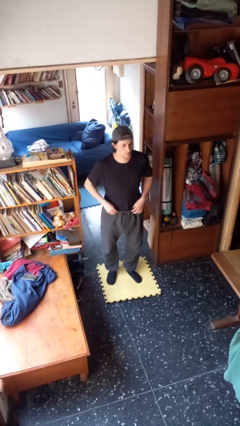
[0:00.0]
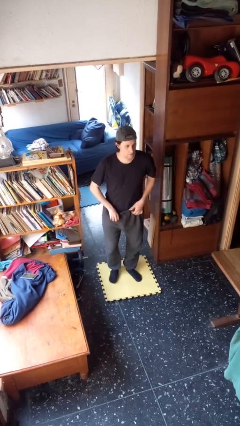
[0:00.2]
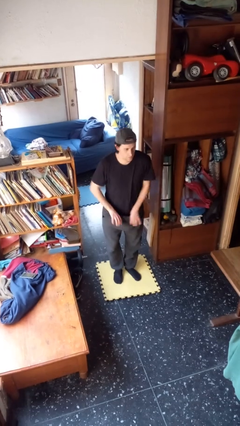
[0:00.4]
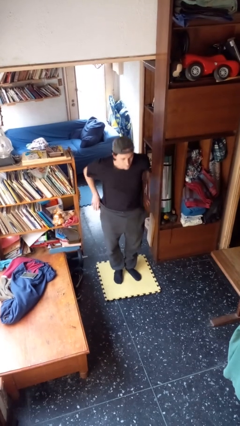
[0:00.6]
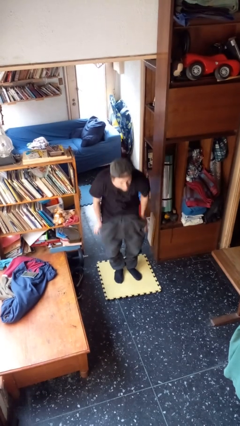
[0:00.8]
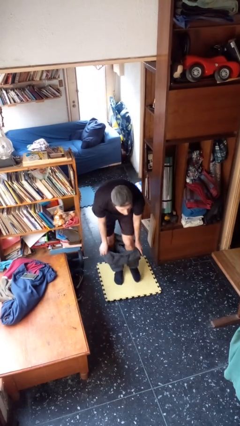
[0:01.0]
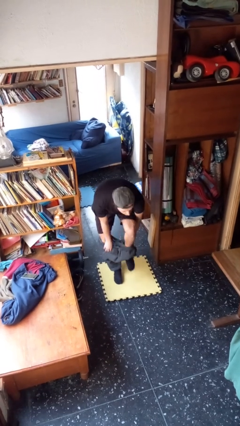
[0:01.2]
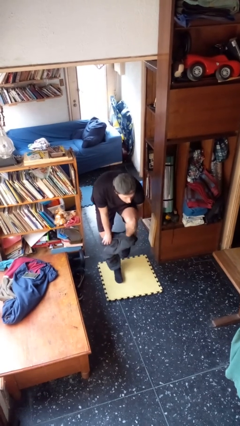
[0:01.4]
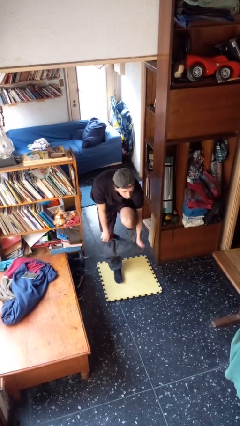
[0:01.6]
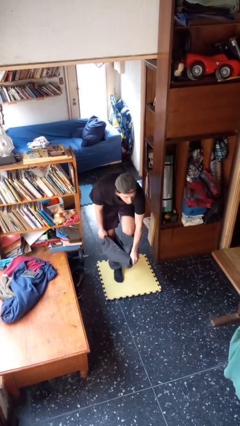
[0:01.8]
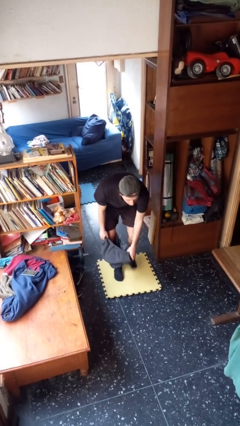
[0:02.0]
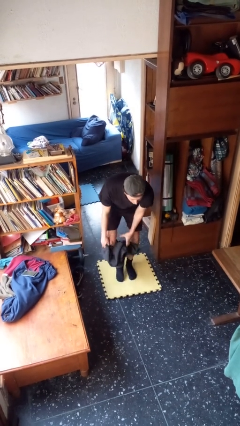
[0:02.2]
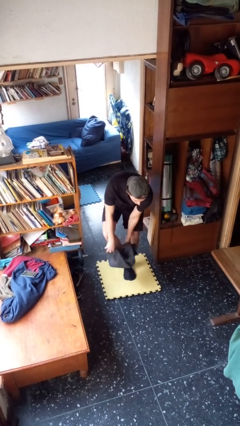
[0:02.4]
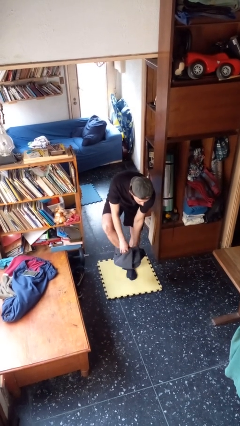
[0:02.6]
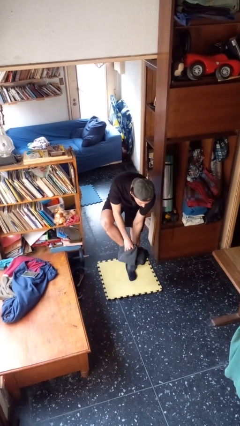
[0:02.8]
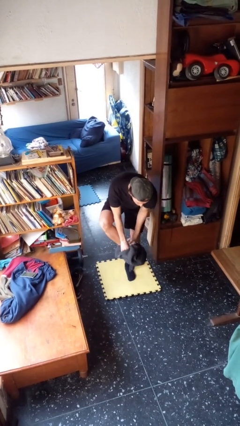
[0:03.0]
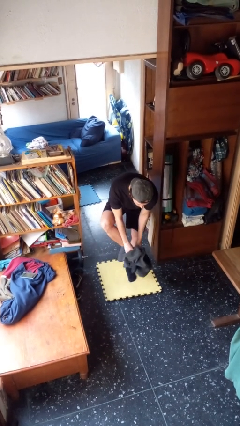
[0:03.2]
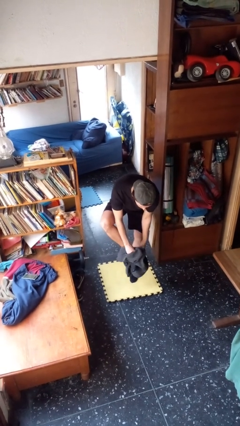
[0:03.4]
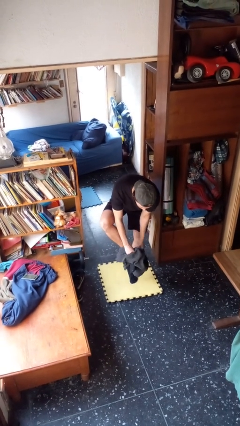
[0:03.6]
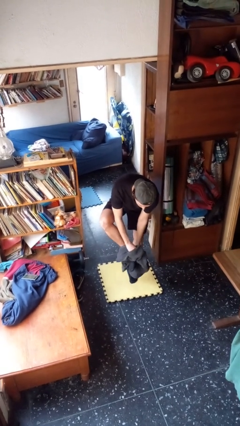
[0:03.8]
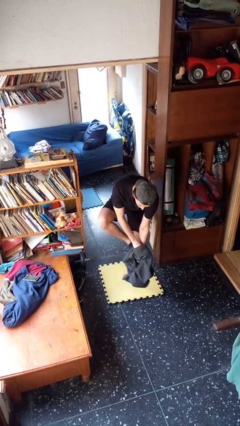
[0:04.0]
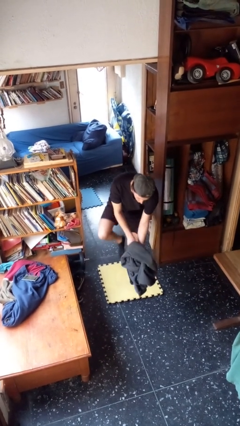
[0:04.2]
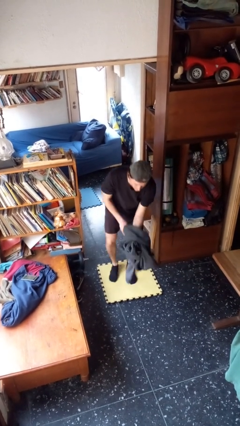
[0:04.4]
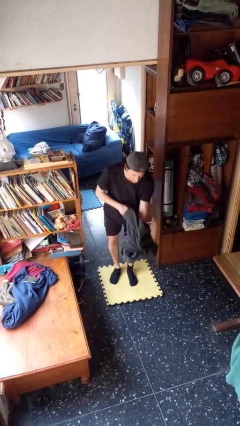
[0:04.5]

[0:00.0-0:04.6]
person takes off pants

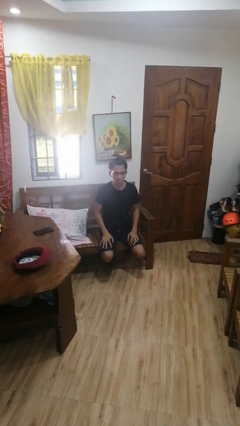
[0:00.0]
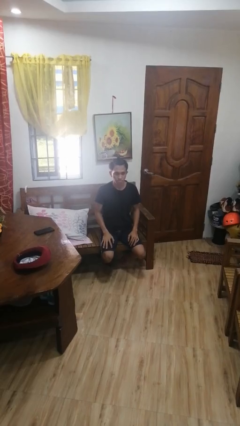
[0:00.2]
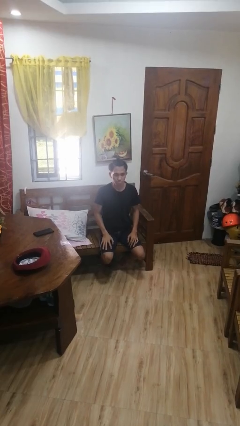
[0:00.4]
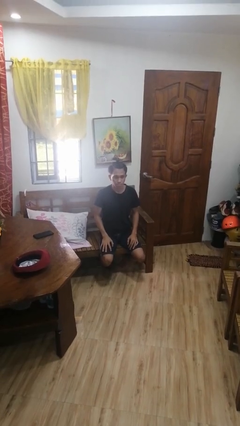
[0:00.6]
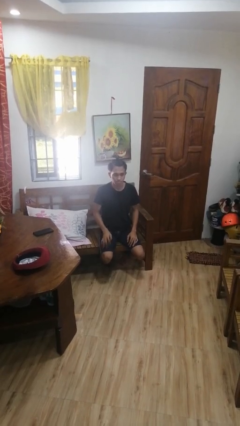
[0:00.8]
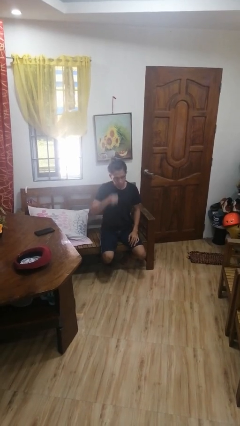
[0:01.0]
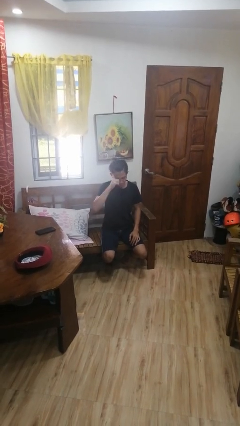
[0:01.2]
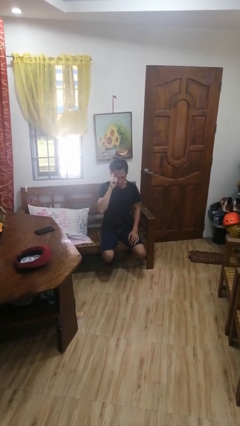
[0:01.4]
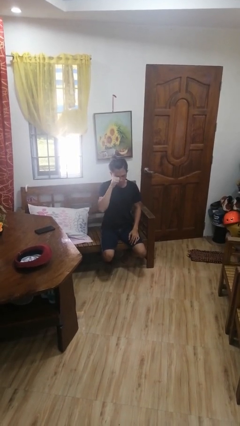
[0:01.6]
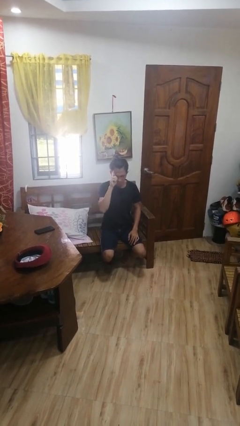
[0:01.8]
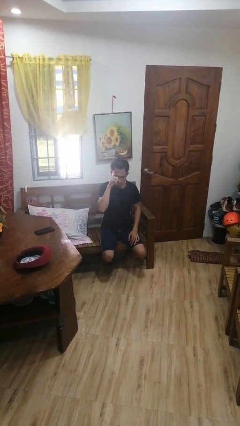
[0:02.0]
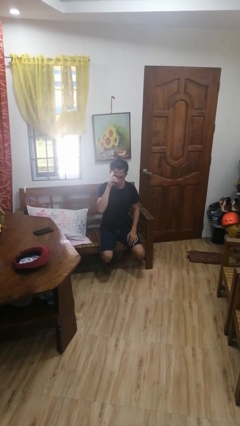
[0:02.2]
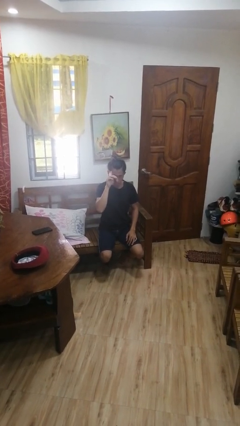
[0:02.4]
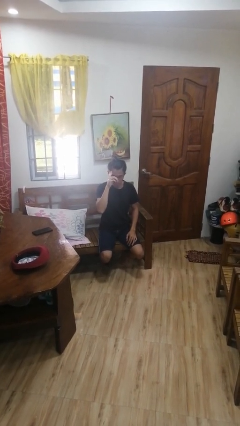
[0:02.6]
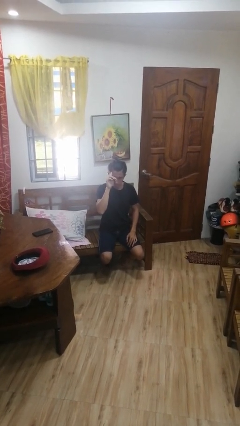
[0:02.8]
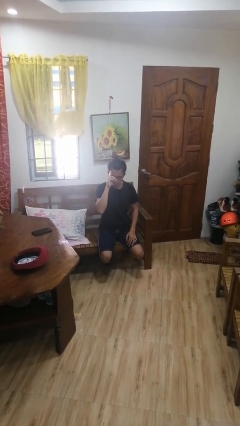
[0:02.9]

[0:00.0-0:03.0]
person rubs eyes

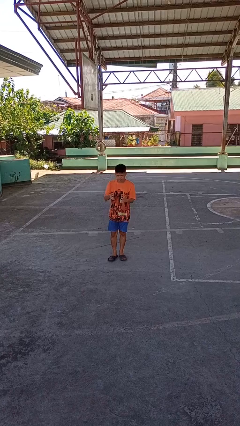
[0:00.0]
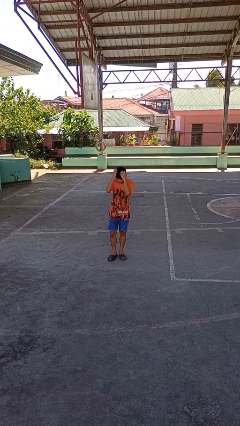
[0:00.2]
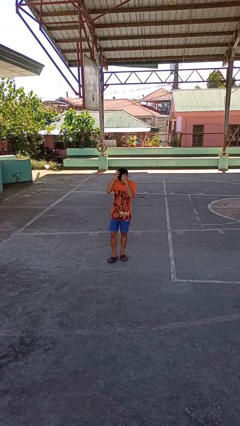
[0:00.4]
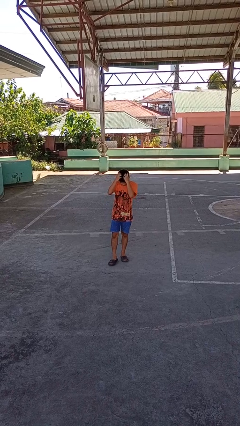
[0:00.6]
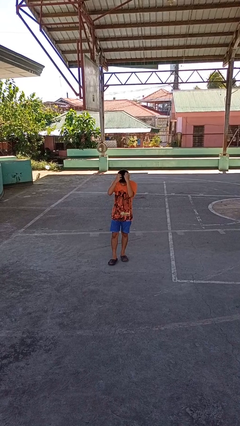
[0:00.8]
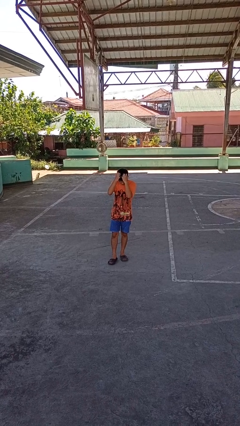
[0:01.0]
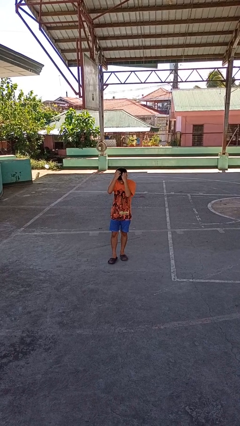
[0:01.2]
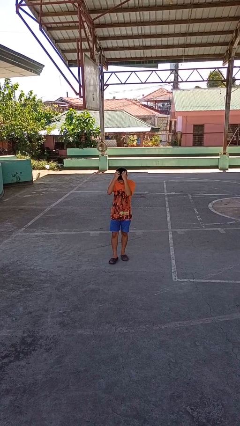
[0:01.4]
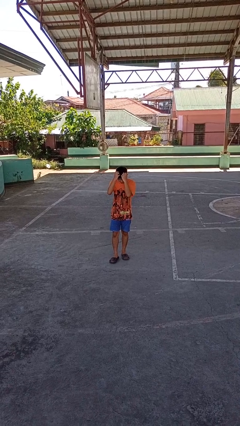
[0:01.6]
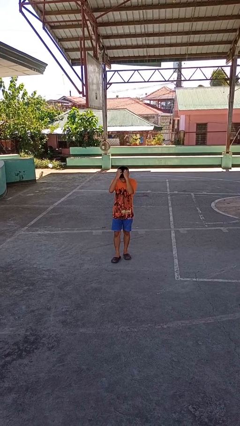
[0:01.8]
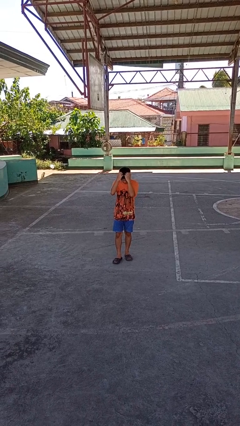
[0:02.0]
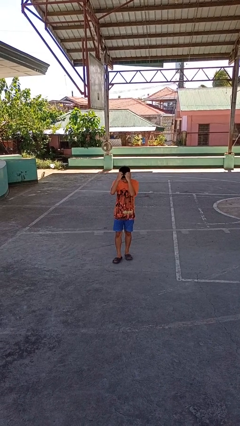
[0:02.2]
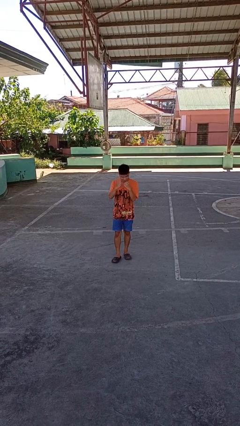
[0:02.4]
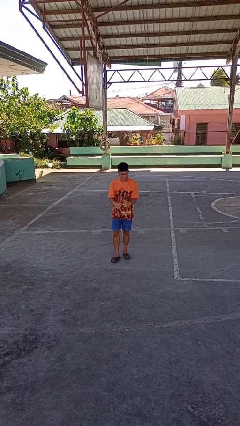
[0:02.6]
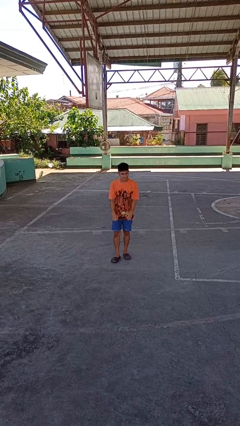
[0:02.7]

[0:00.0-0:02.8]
person scratches face

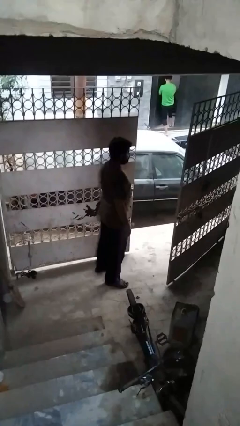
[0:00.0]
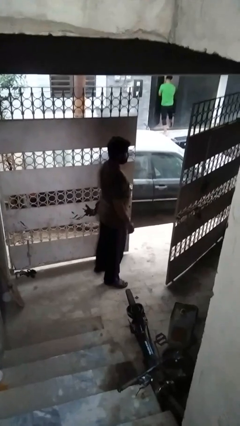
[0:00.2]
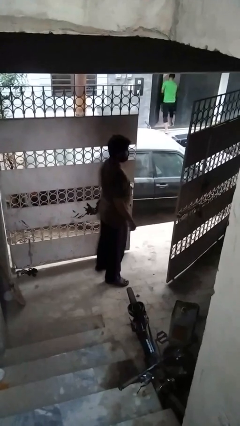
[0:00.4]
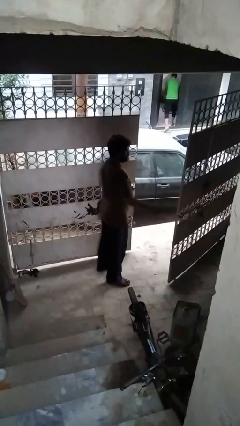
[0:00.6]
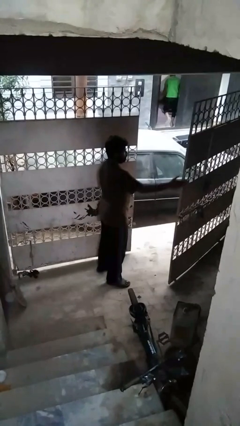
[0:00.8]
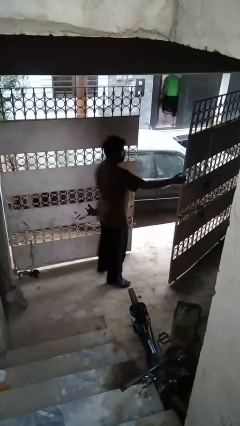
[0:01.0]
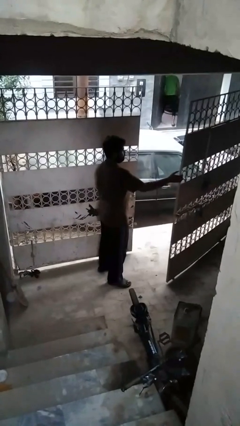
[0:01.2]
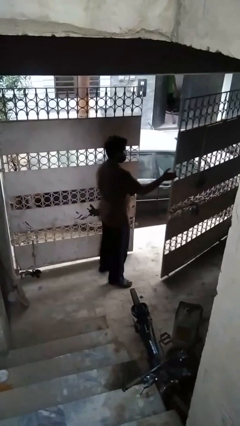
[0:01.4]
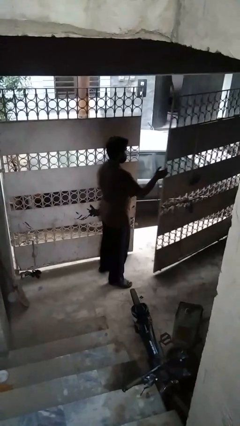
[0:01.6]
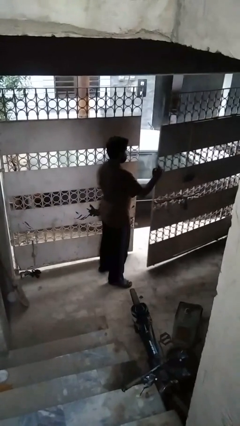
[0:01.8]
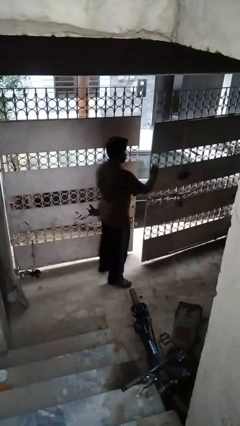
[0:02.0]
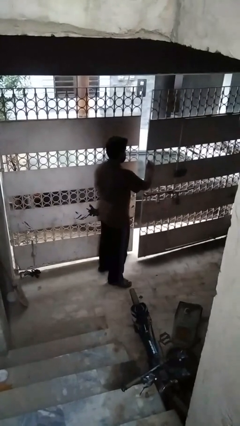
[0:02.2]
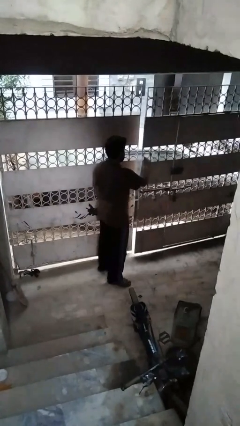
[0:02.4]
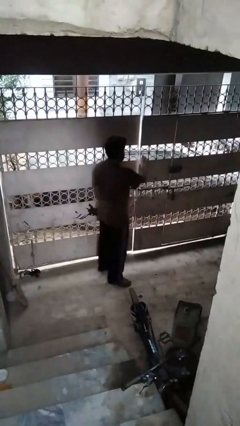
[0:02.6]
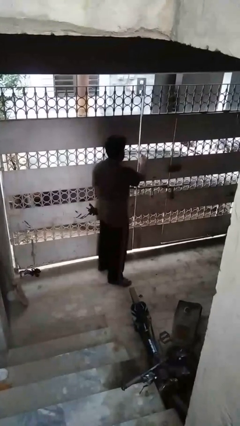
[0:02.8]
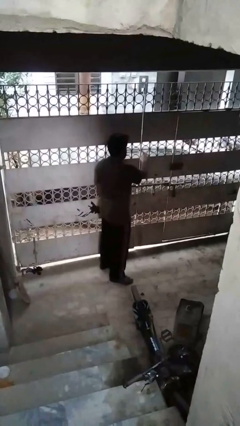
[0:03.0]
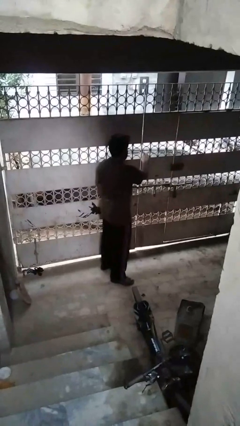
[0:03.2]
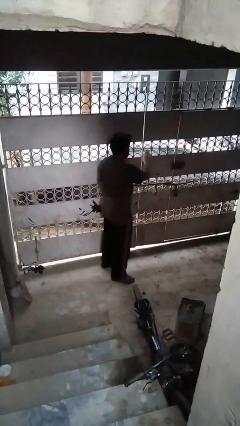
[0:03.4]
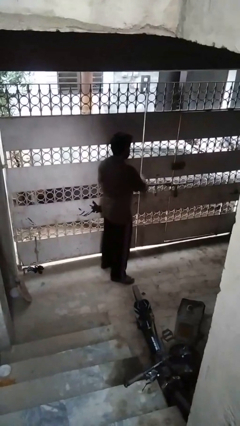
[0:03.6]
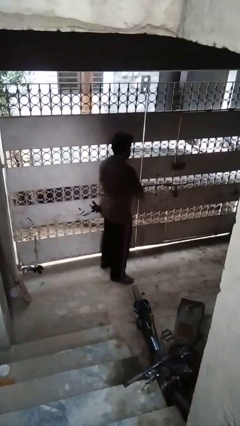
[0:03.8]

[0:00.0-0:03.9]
person closes gate

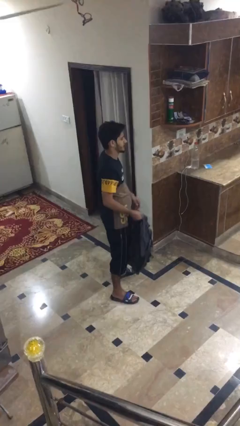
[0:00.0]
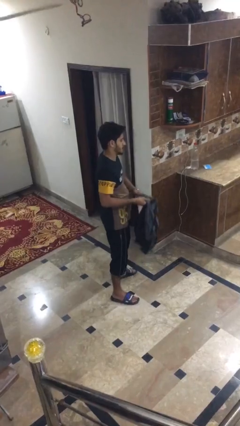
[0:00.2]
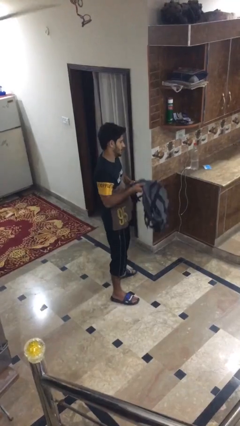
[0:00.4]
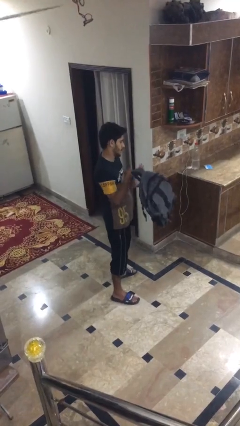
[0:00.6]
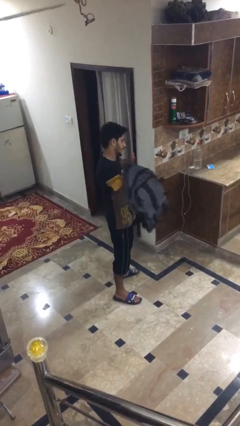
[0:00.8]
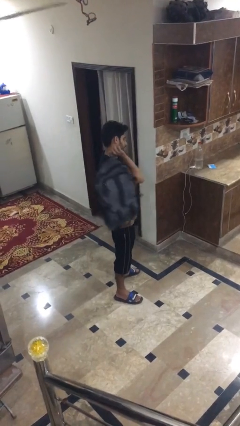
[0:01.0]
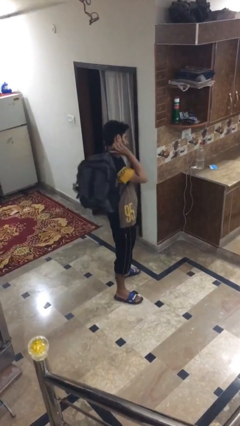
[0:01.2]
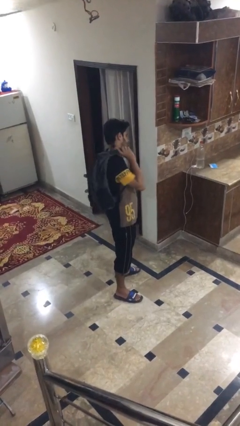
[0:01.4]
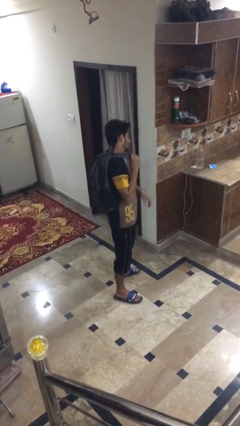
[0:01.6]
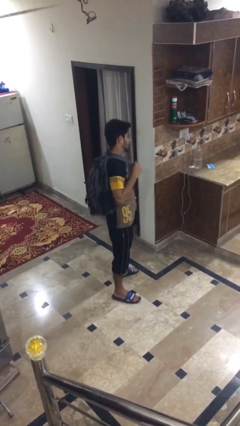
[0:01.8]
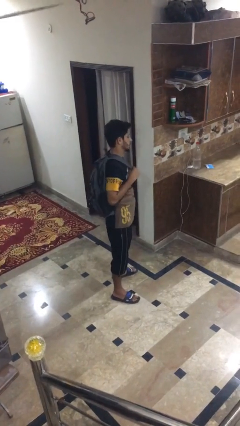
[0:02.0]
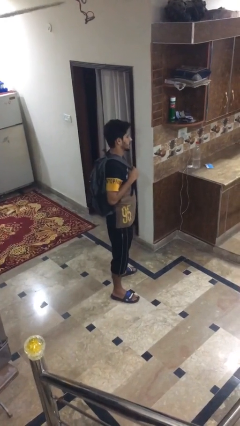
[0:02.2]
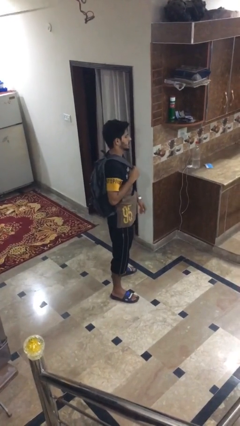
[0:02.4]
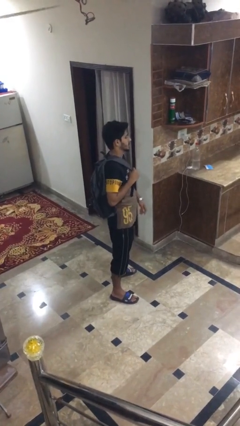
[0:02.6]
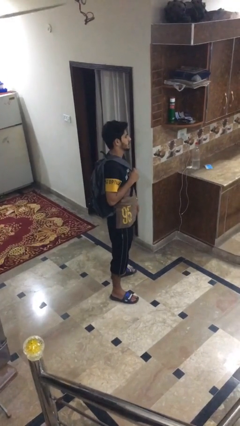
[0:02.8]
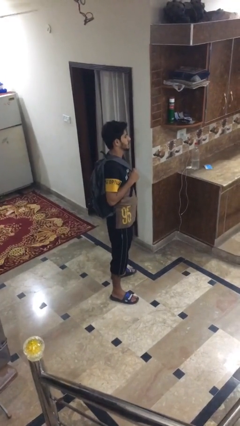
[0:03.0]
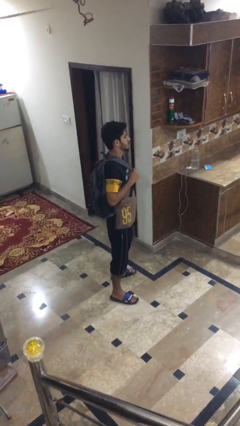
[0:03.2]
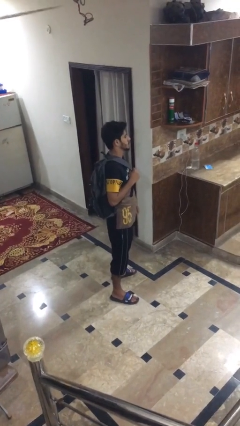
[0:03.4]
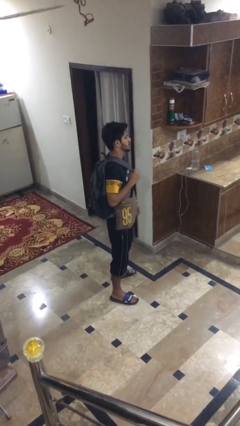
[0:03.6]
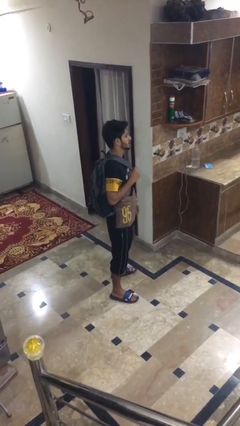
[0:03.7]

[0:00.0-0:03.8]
person puts on backpack
